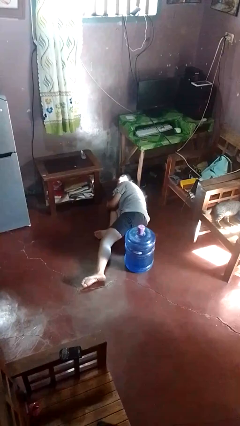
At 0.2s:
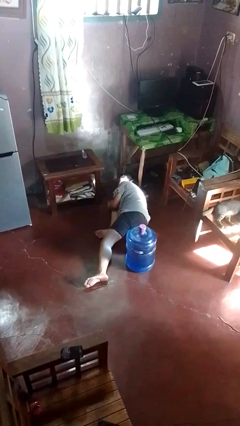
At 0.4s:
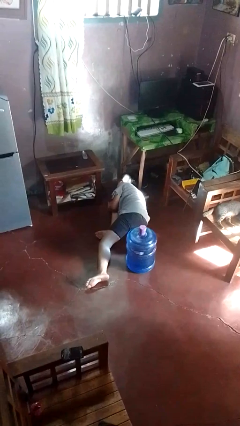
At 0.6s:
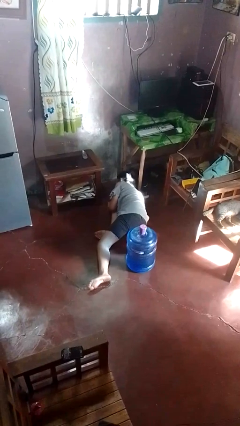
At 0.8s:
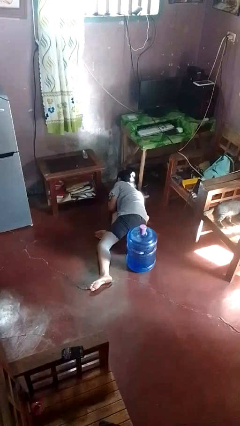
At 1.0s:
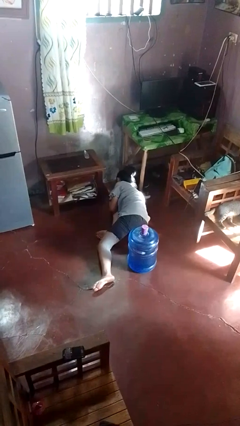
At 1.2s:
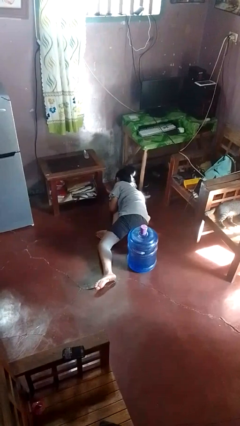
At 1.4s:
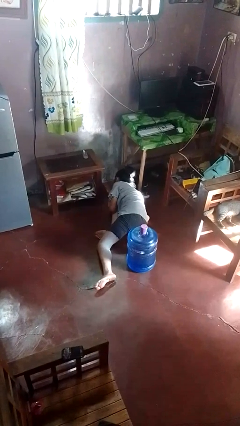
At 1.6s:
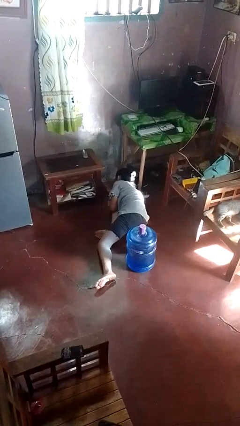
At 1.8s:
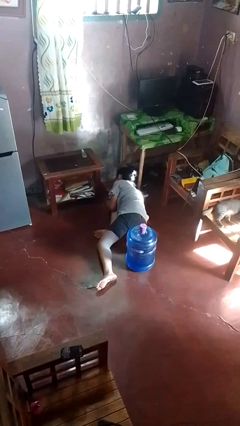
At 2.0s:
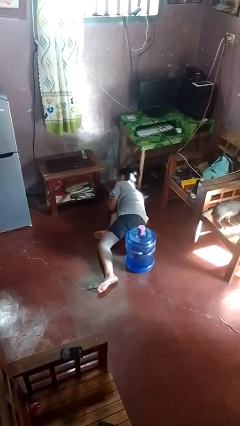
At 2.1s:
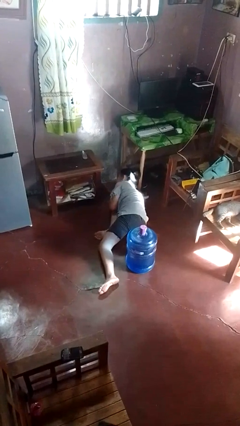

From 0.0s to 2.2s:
person lies down on floor

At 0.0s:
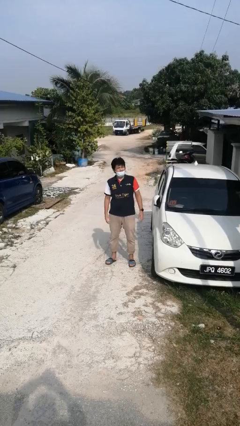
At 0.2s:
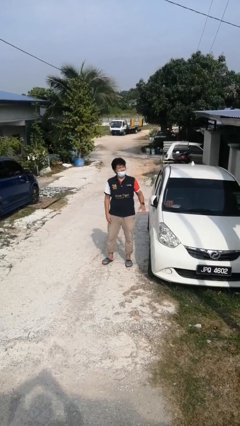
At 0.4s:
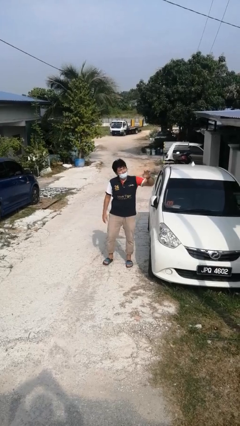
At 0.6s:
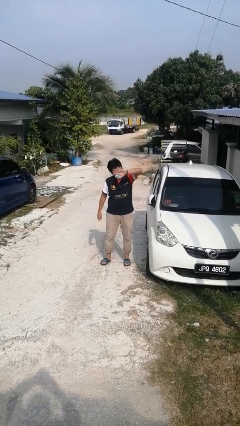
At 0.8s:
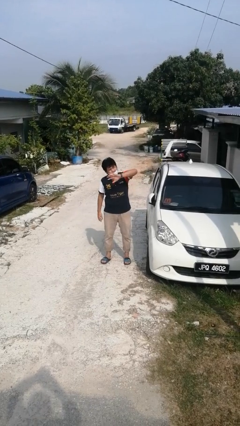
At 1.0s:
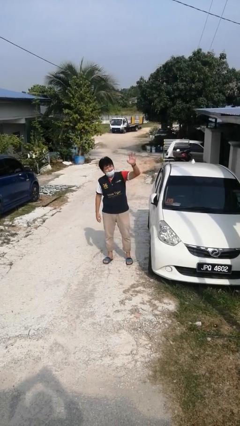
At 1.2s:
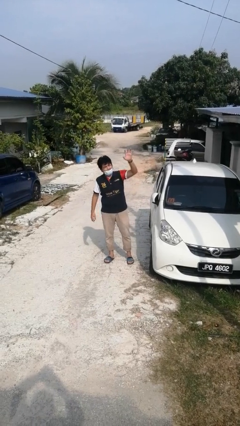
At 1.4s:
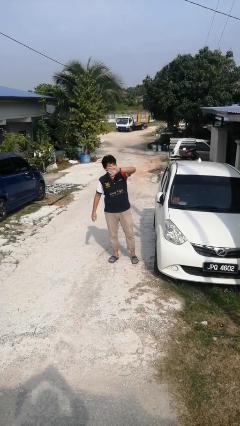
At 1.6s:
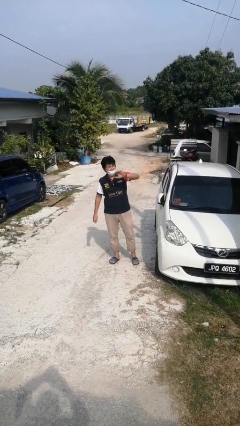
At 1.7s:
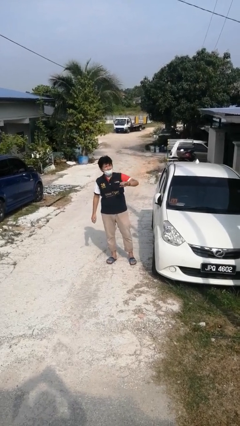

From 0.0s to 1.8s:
person waves at person

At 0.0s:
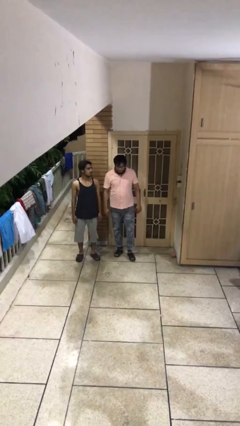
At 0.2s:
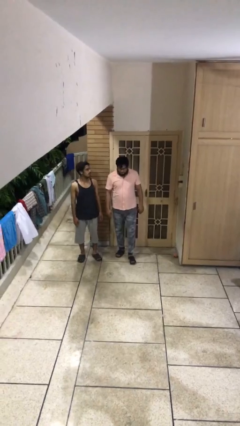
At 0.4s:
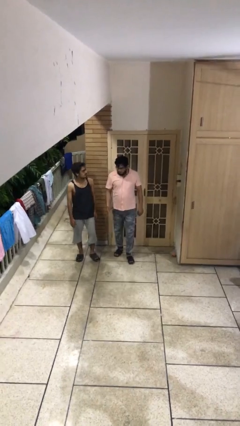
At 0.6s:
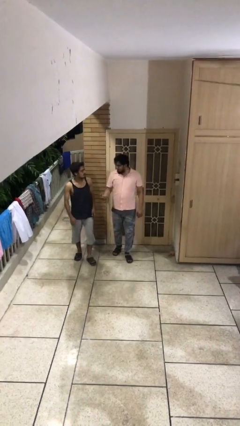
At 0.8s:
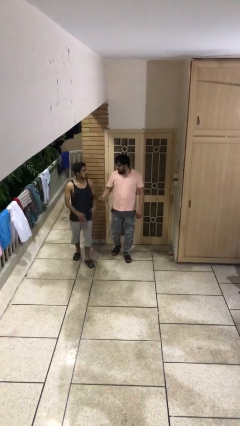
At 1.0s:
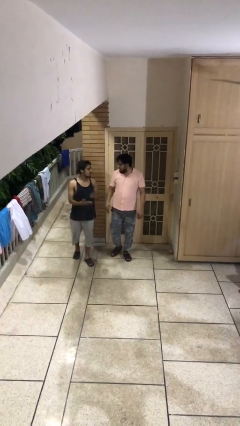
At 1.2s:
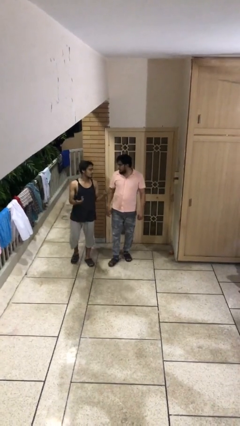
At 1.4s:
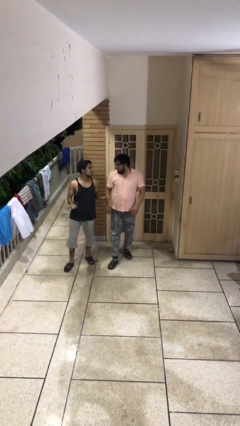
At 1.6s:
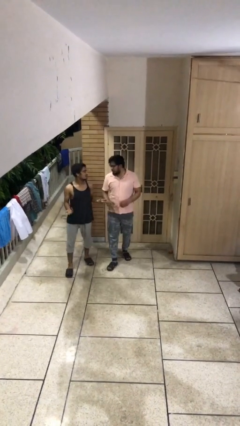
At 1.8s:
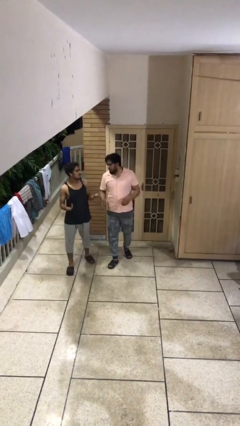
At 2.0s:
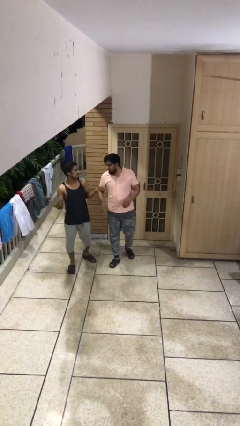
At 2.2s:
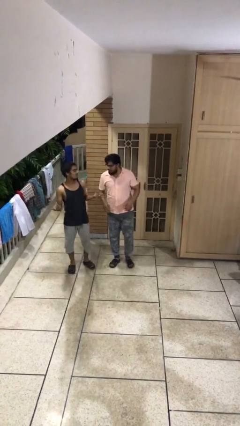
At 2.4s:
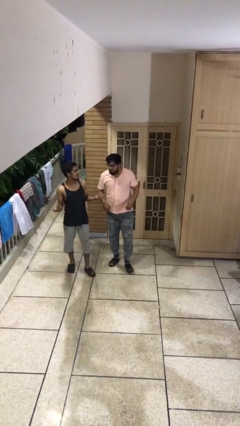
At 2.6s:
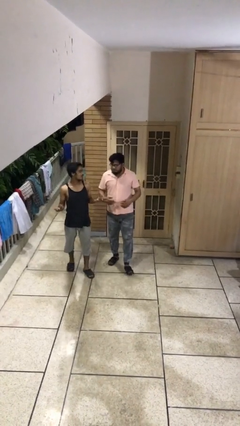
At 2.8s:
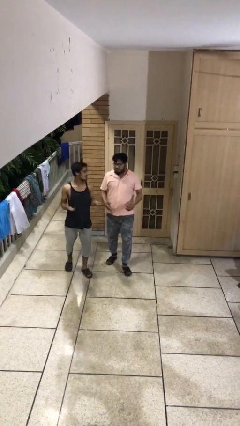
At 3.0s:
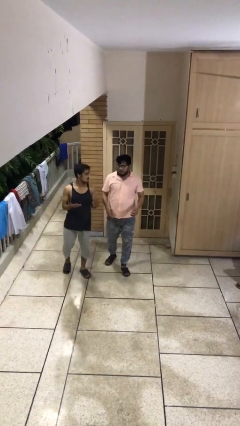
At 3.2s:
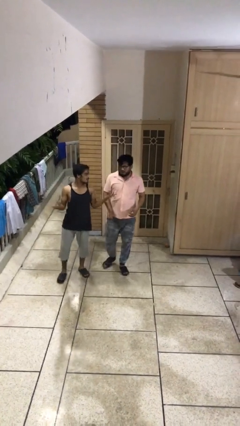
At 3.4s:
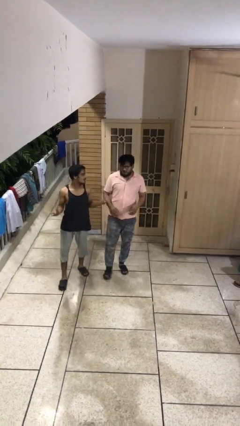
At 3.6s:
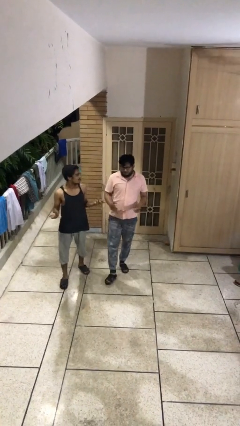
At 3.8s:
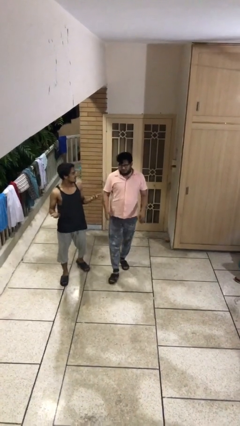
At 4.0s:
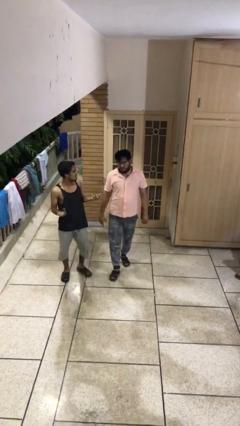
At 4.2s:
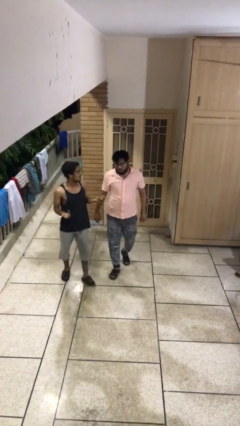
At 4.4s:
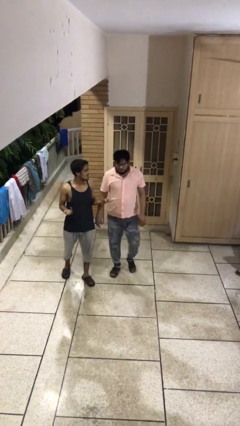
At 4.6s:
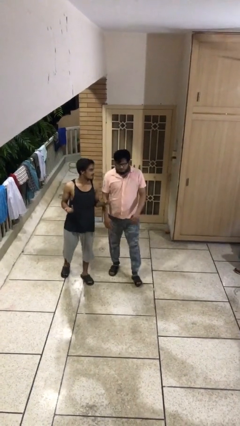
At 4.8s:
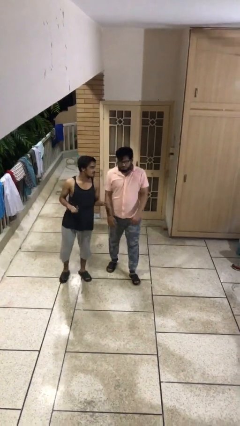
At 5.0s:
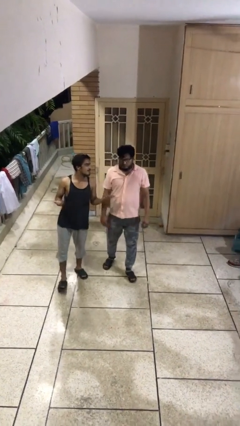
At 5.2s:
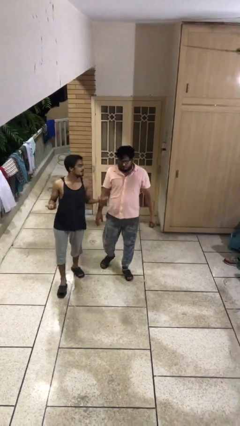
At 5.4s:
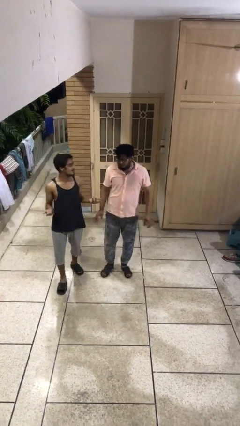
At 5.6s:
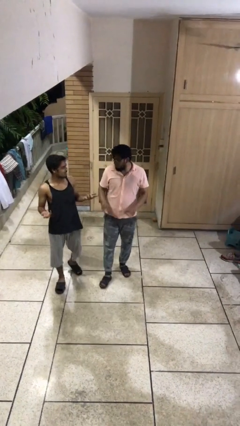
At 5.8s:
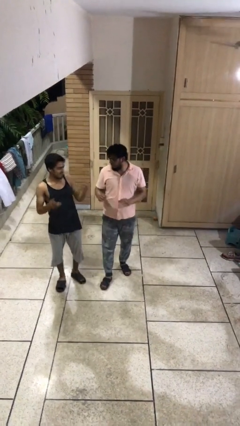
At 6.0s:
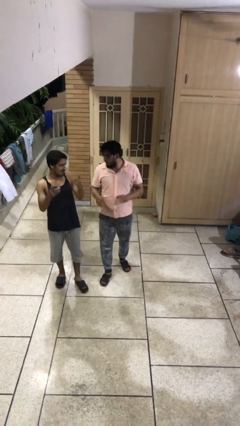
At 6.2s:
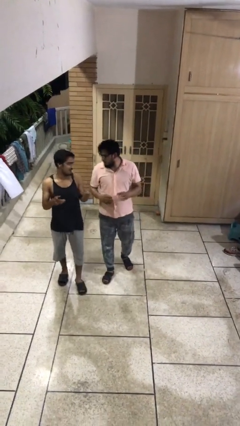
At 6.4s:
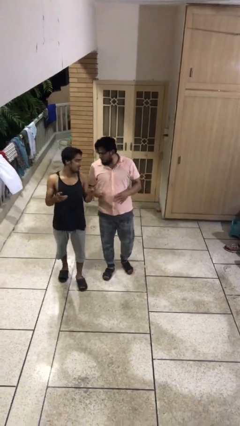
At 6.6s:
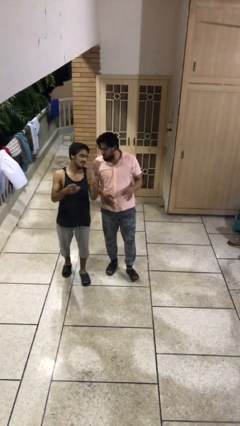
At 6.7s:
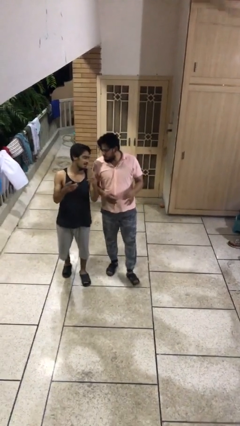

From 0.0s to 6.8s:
person talks to person

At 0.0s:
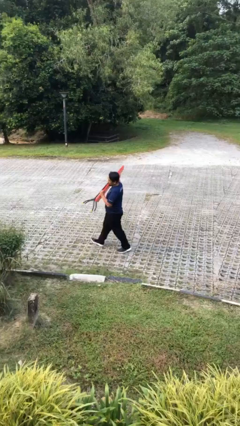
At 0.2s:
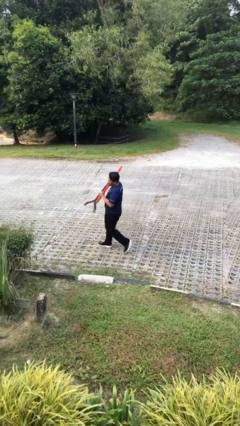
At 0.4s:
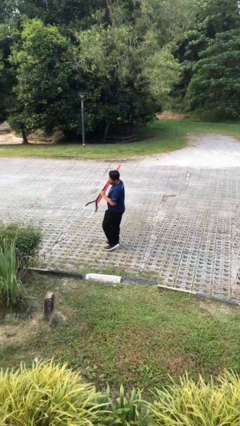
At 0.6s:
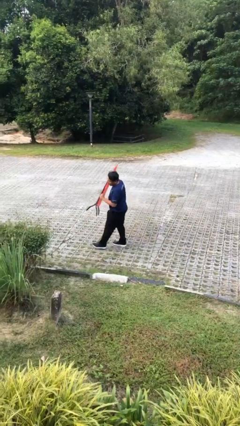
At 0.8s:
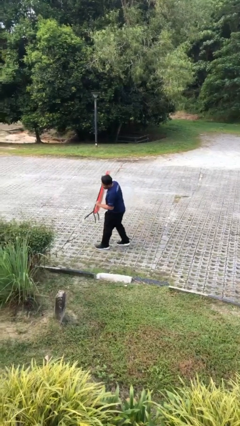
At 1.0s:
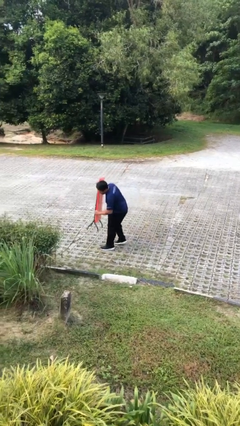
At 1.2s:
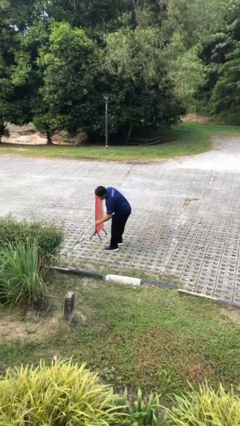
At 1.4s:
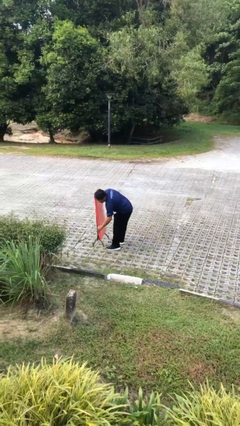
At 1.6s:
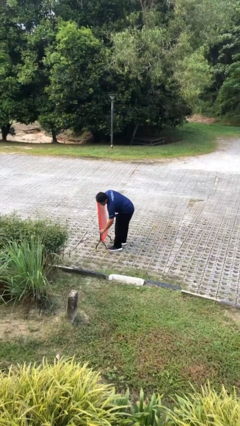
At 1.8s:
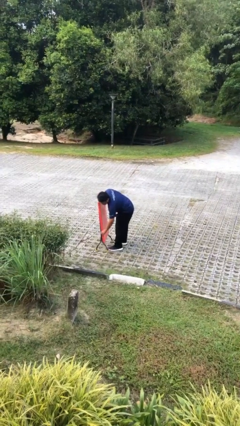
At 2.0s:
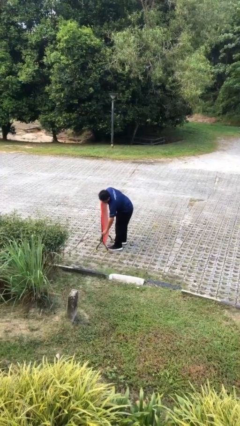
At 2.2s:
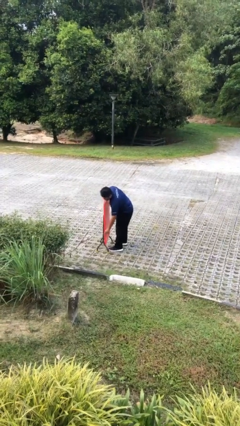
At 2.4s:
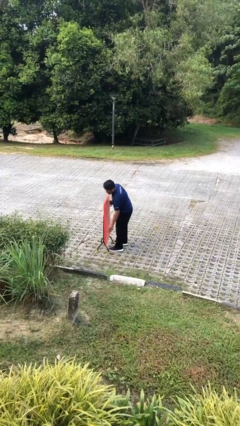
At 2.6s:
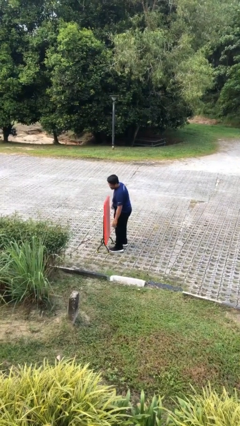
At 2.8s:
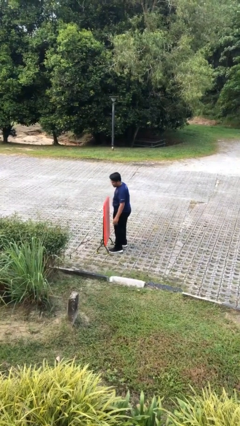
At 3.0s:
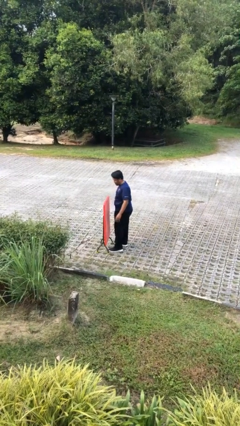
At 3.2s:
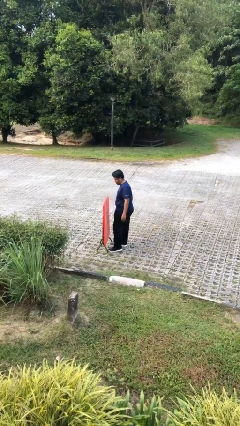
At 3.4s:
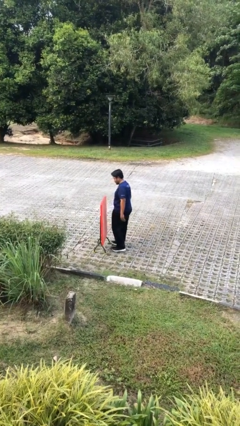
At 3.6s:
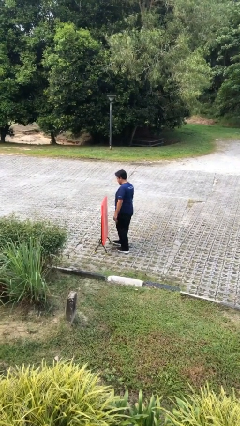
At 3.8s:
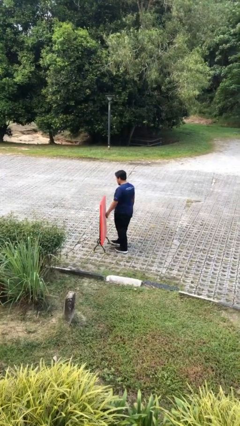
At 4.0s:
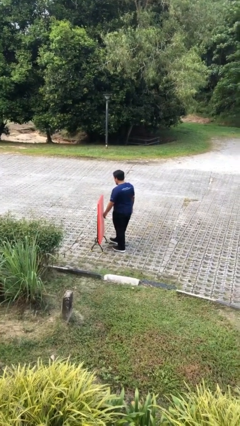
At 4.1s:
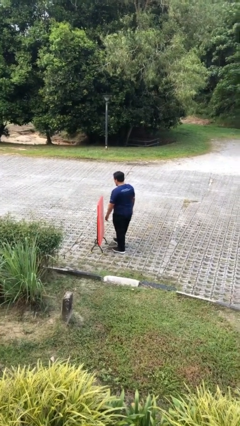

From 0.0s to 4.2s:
person puts down object on floor

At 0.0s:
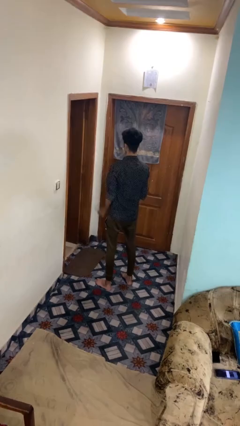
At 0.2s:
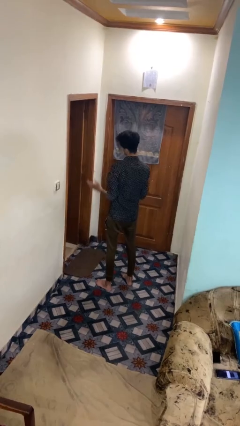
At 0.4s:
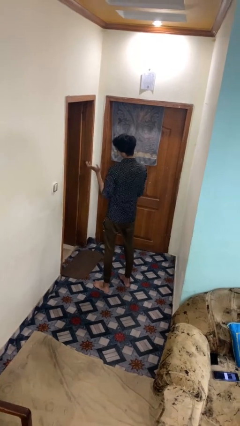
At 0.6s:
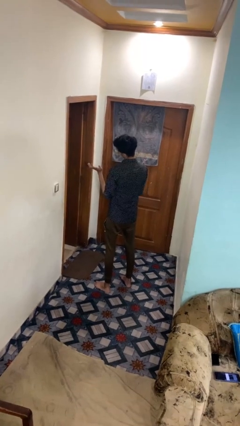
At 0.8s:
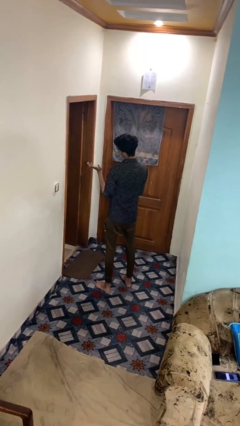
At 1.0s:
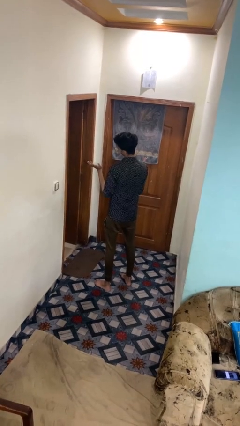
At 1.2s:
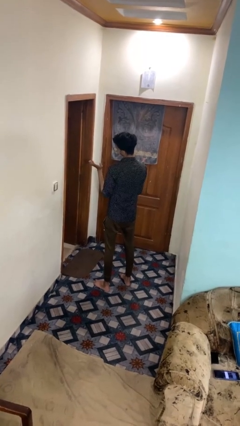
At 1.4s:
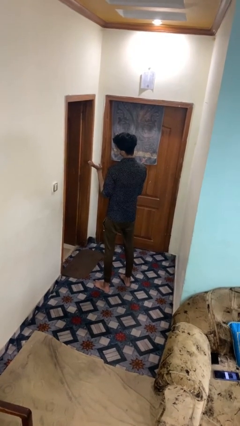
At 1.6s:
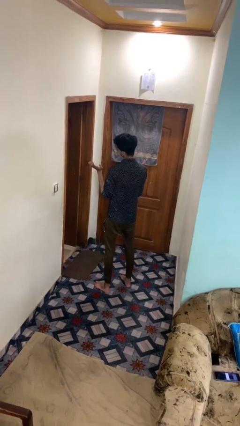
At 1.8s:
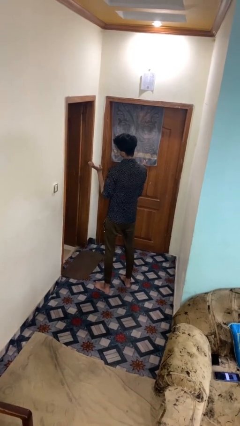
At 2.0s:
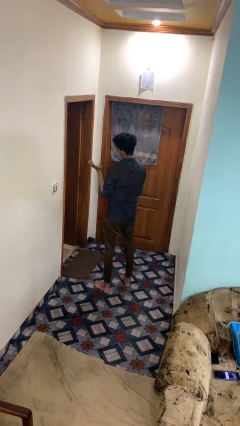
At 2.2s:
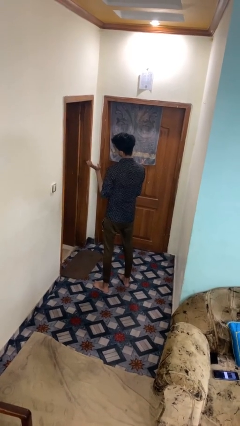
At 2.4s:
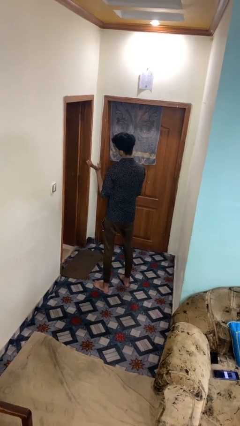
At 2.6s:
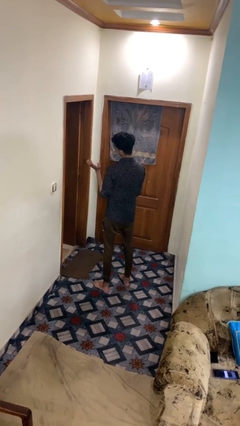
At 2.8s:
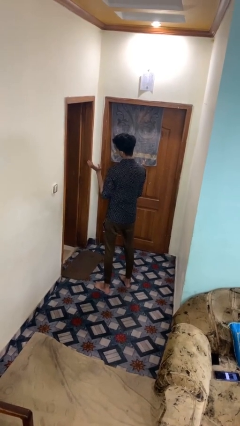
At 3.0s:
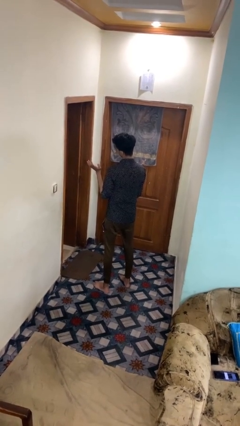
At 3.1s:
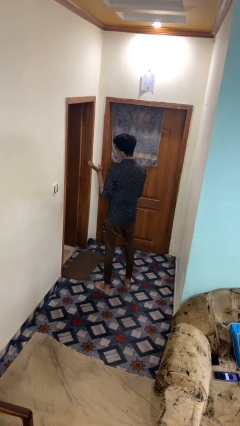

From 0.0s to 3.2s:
person shrugs
